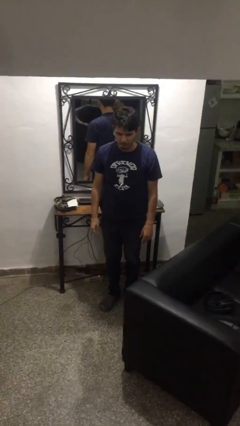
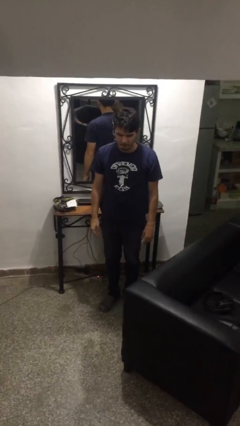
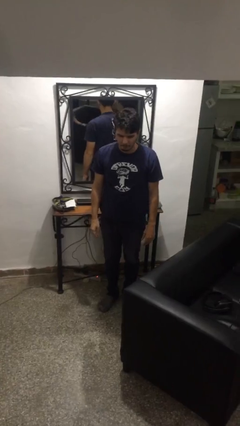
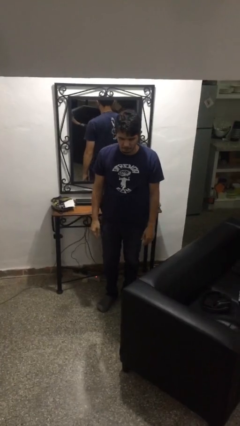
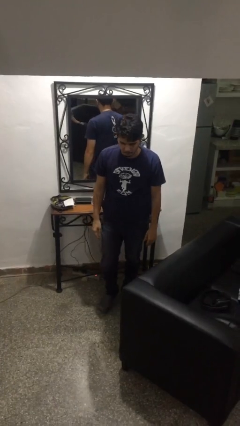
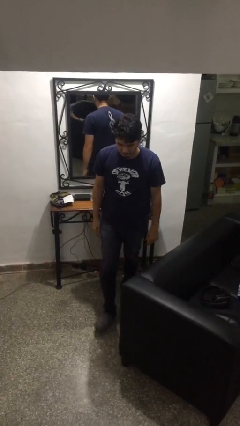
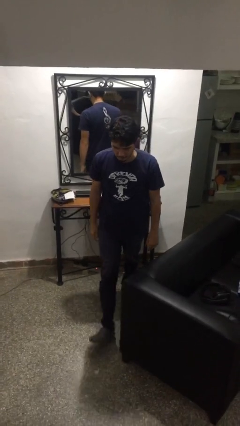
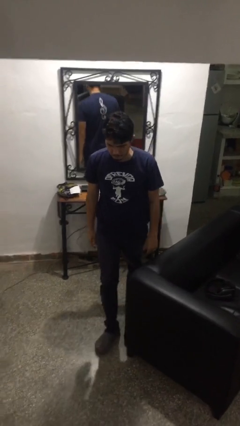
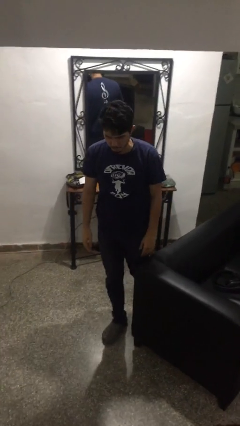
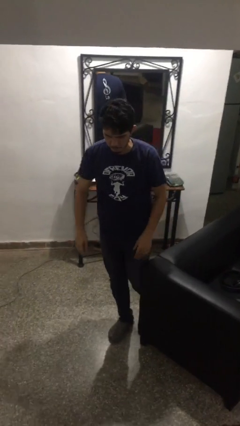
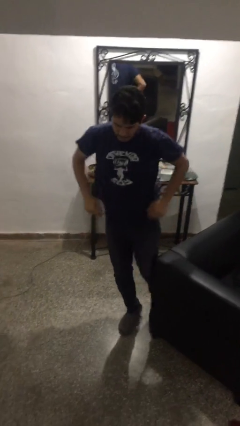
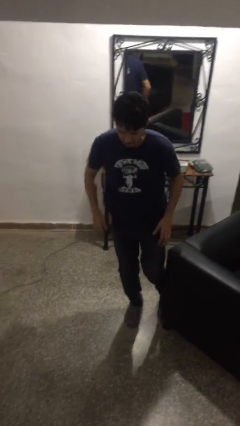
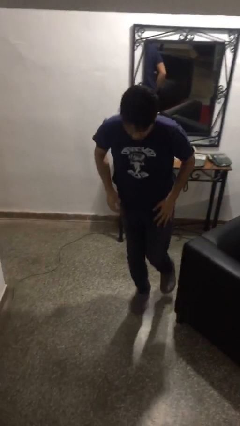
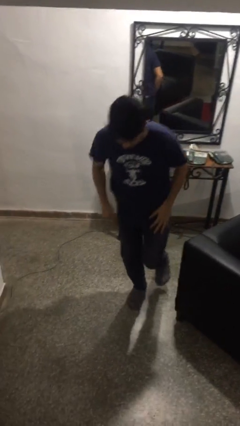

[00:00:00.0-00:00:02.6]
person trips on object on floor

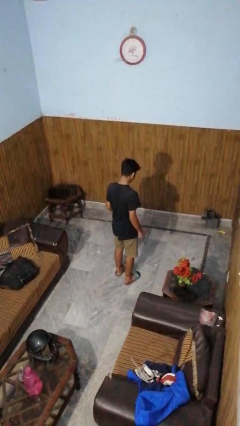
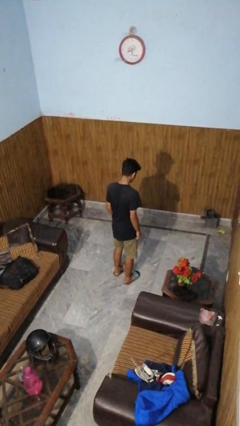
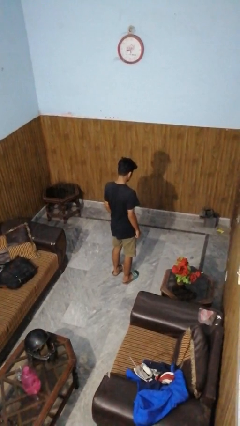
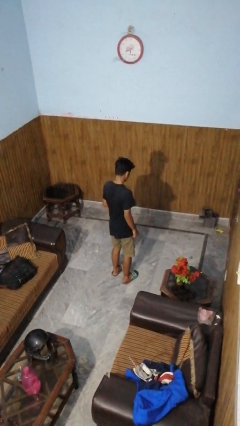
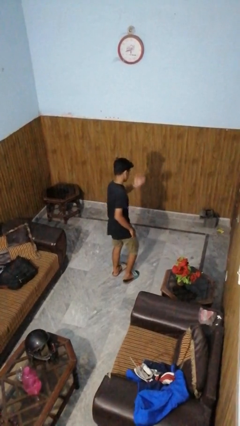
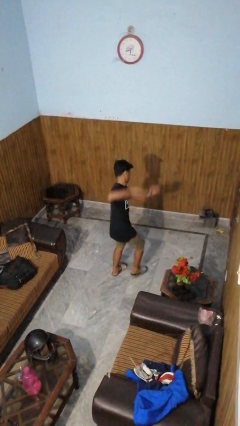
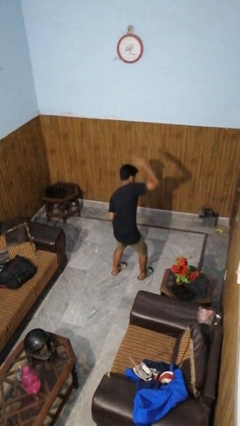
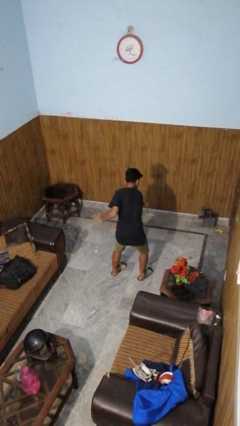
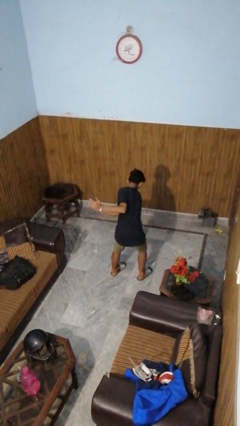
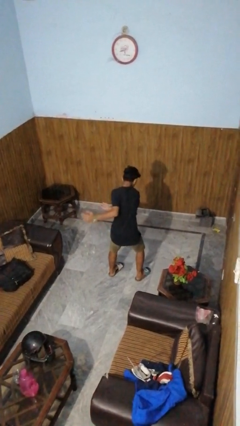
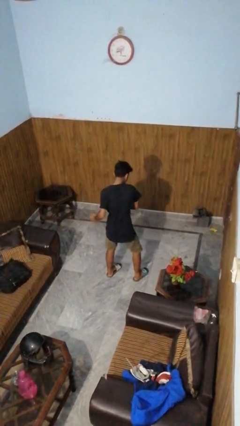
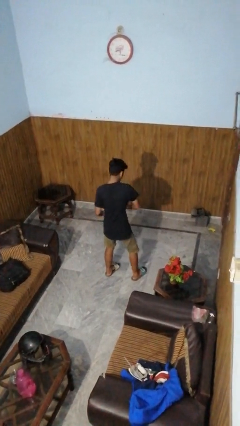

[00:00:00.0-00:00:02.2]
person karate chop

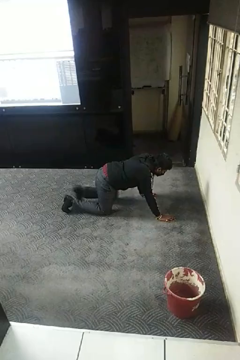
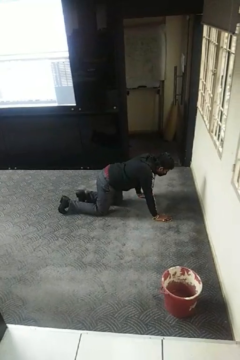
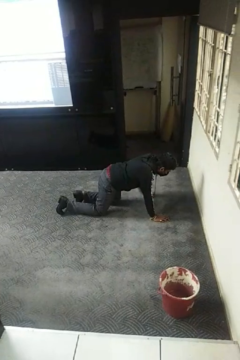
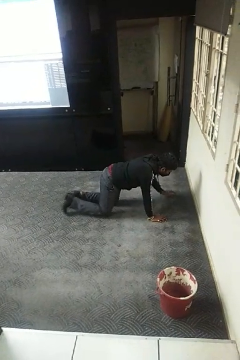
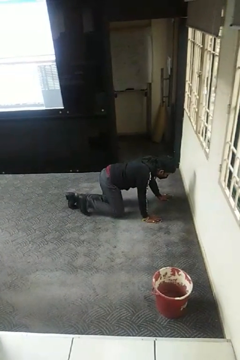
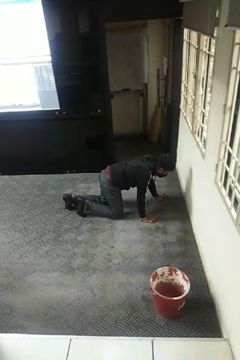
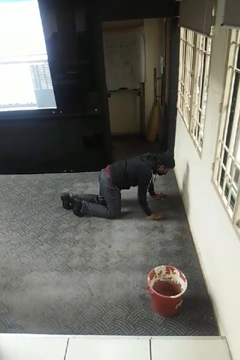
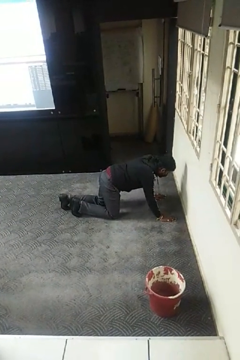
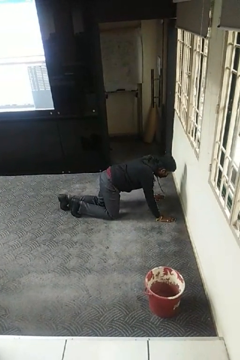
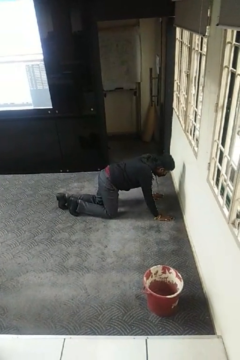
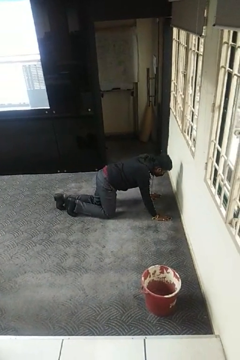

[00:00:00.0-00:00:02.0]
person crawls

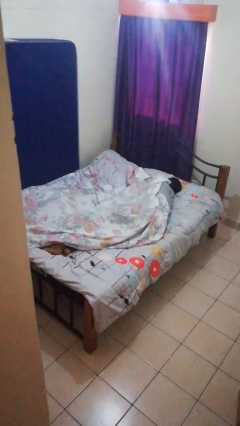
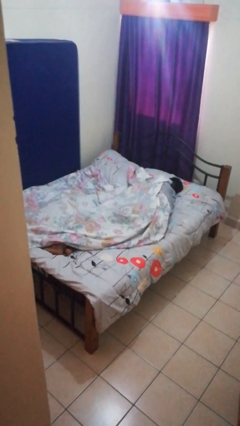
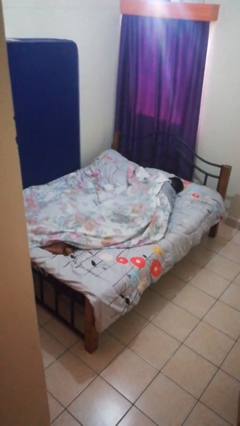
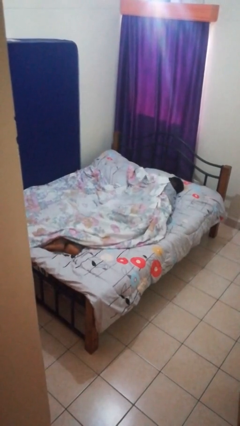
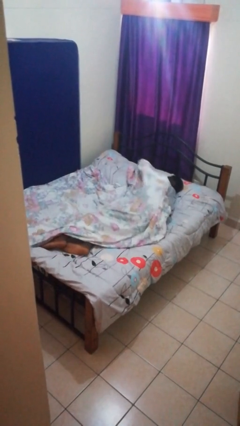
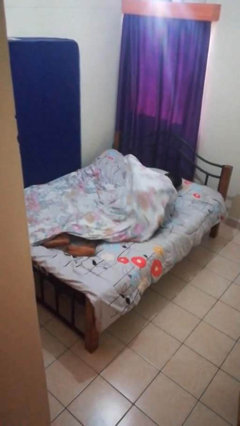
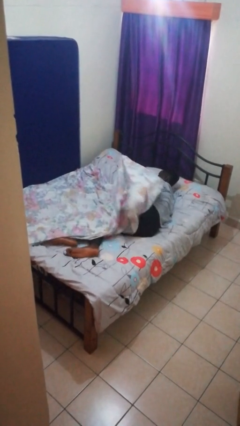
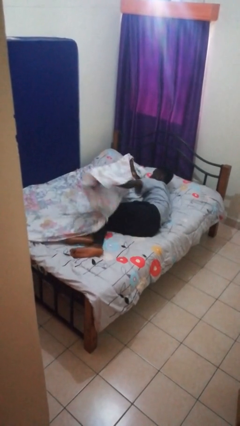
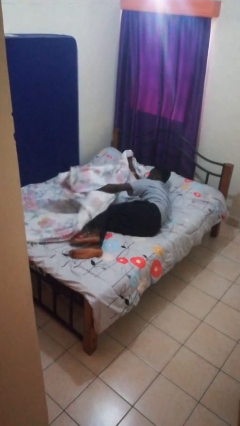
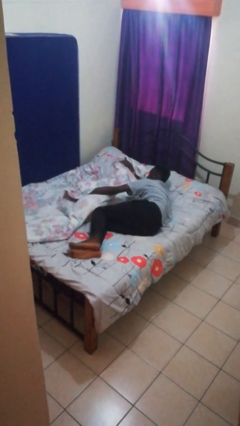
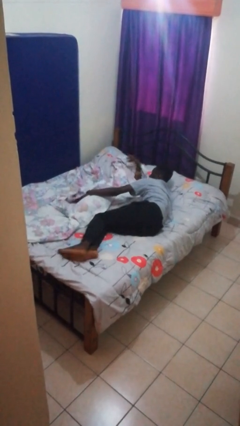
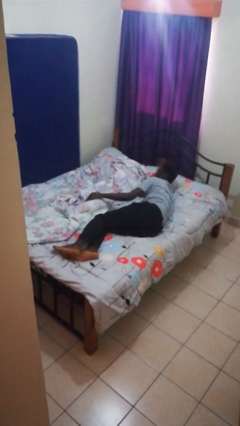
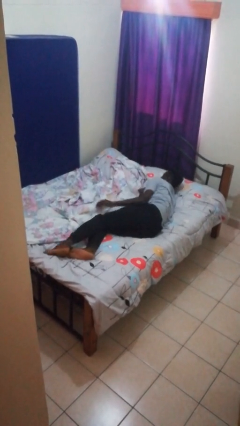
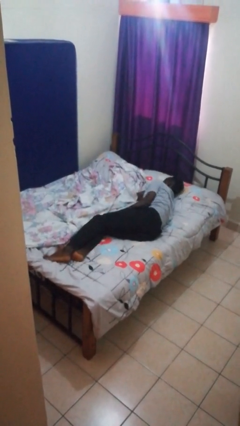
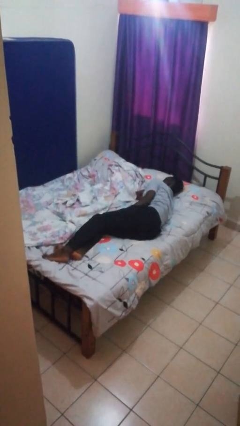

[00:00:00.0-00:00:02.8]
person uncovers with bedsheets

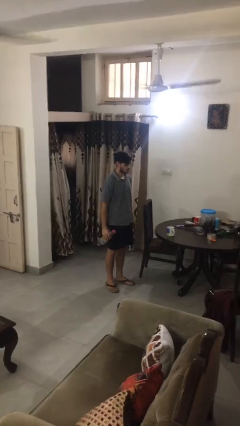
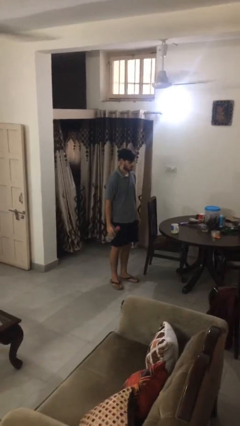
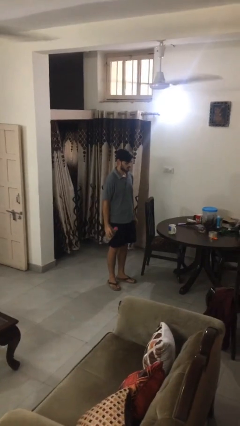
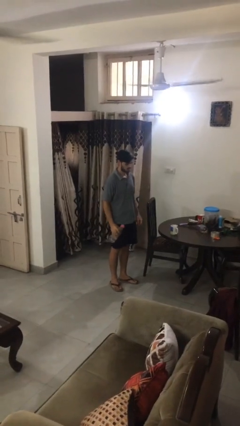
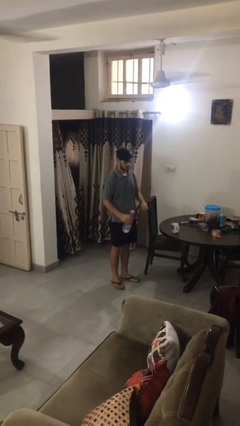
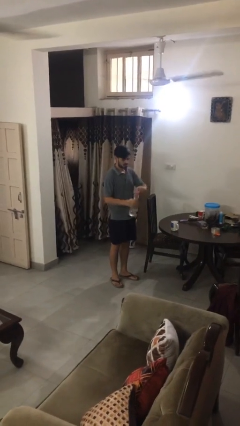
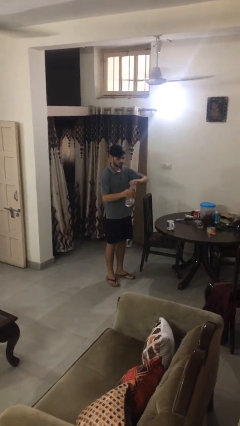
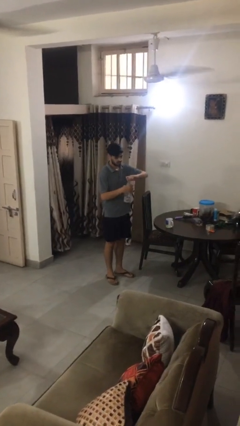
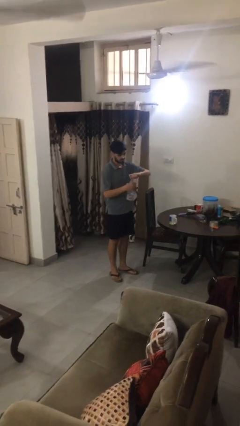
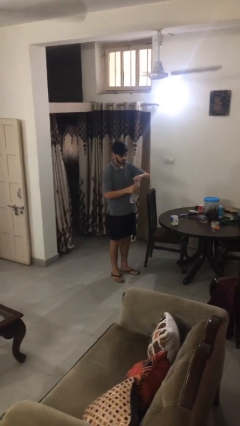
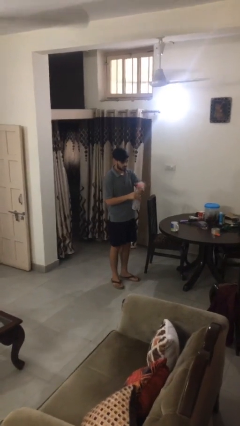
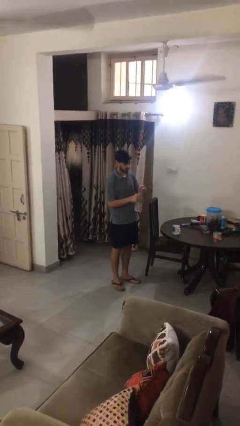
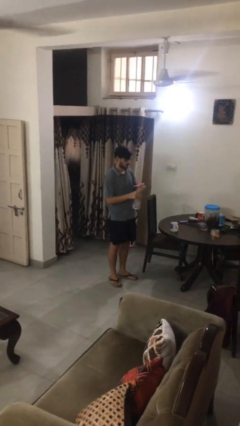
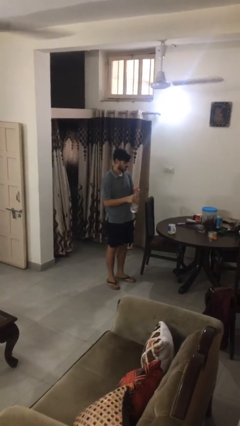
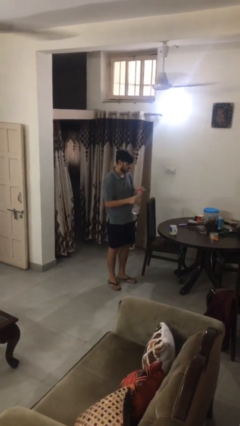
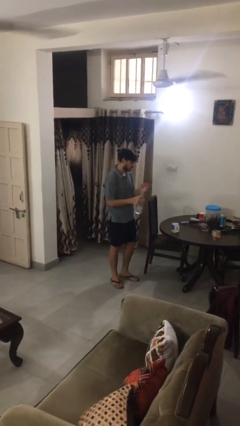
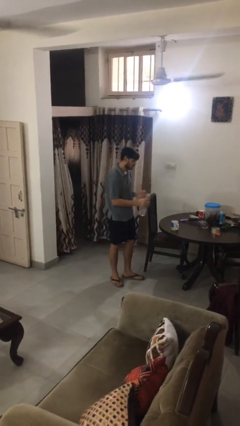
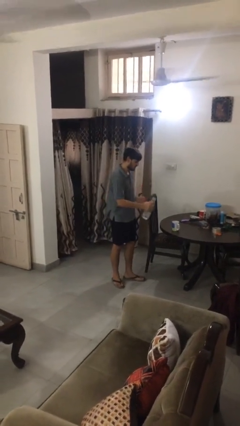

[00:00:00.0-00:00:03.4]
person unscrews lid from bottle

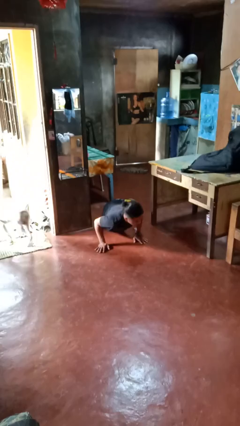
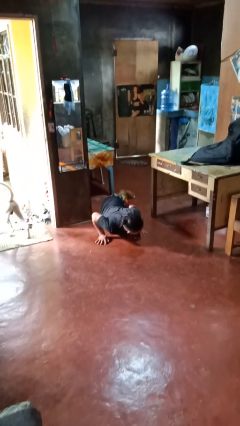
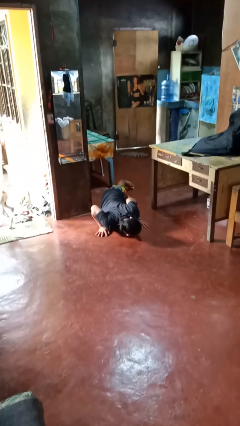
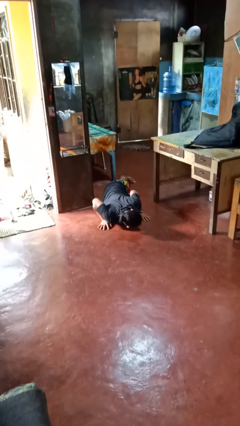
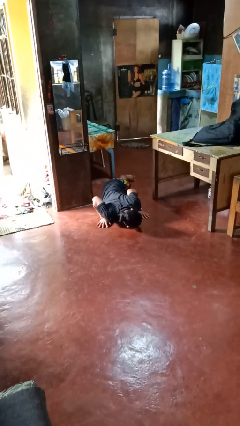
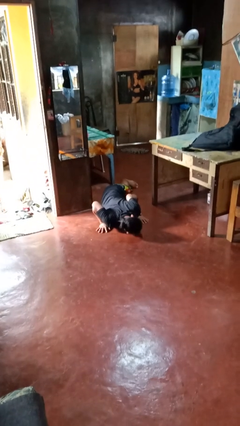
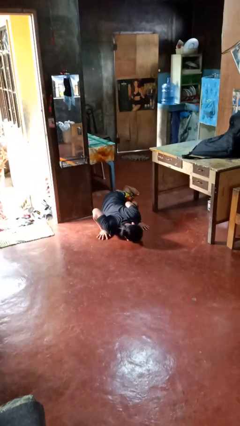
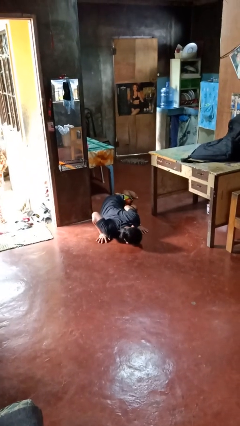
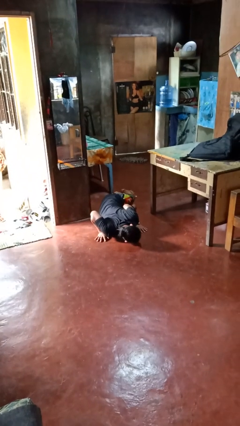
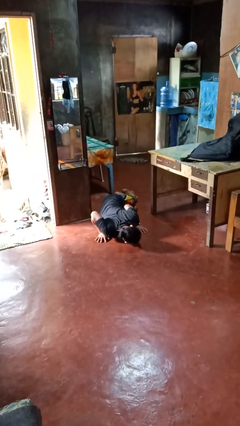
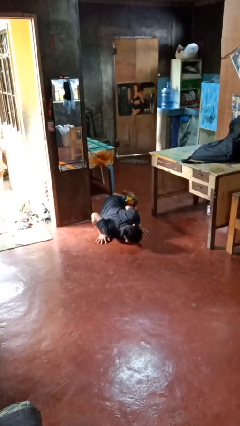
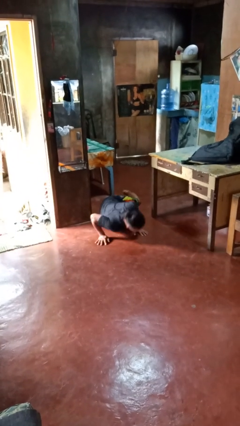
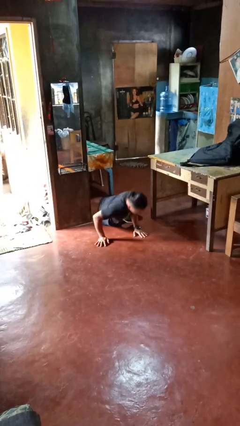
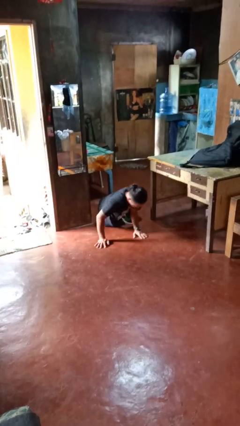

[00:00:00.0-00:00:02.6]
person lies down on floor

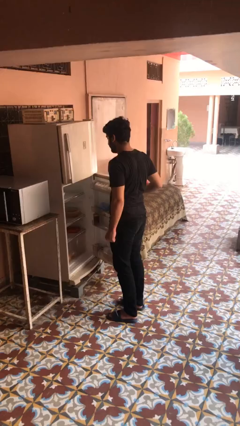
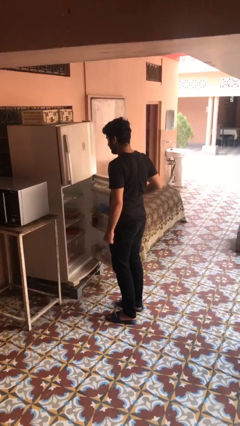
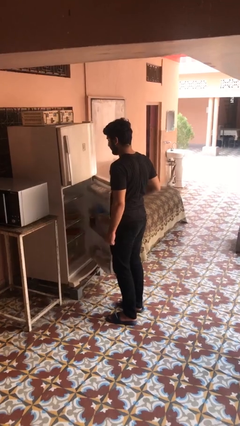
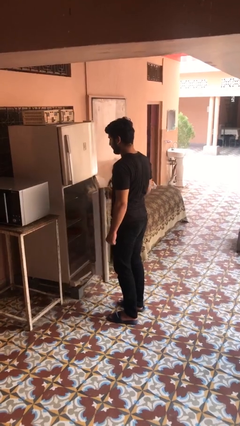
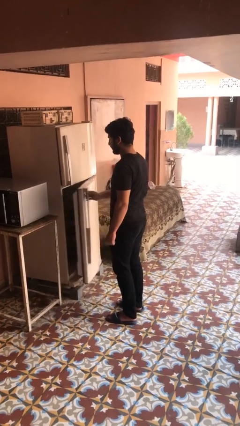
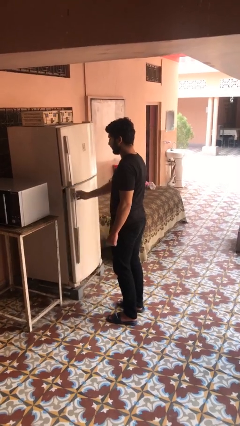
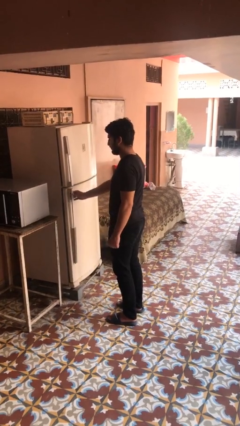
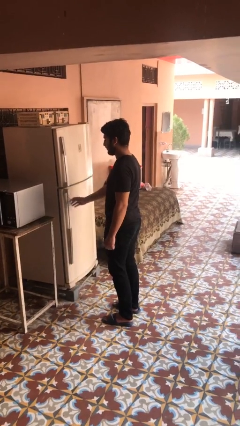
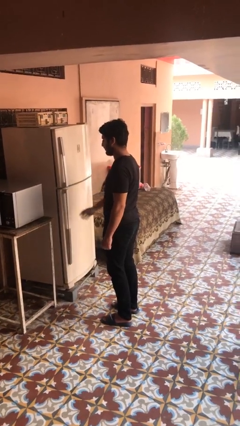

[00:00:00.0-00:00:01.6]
person closes refrigerator
